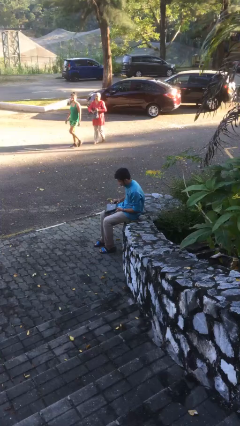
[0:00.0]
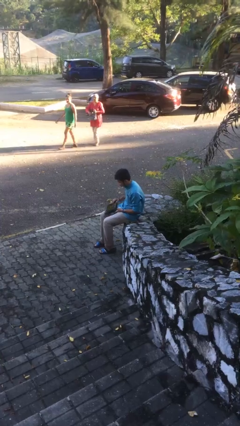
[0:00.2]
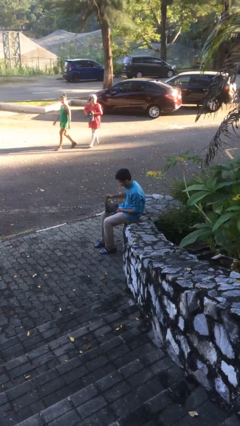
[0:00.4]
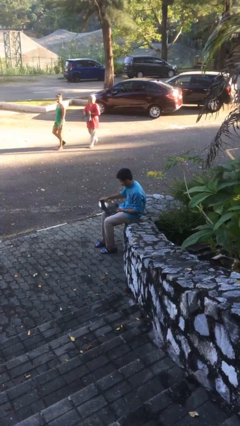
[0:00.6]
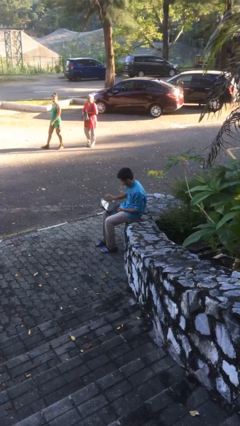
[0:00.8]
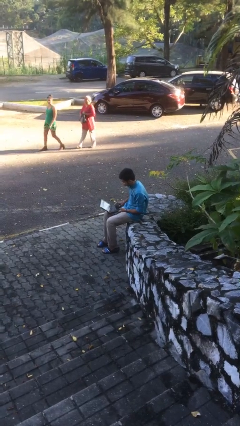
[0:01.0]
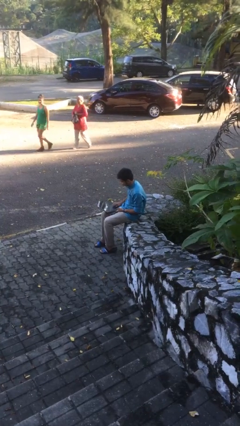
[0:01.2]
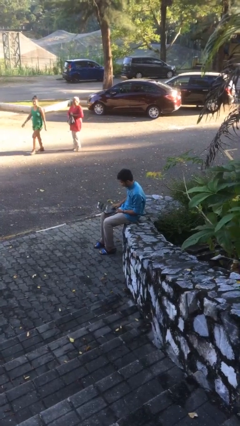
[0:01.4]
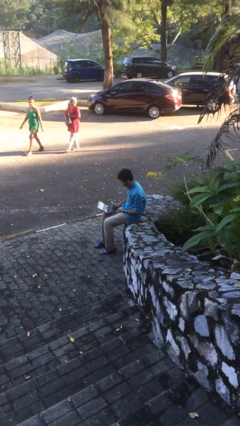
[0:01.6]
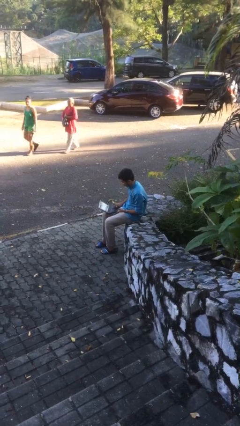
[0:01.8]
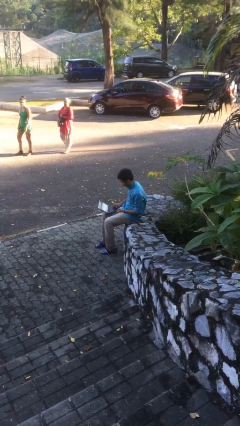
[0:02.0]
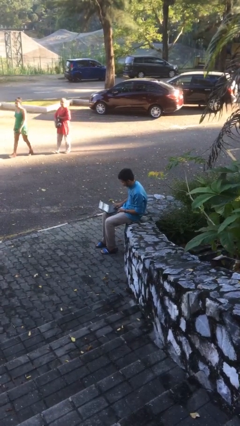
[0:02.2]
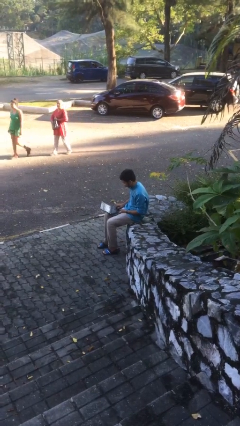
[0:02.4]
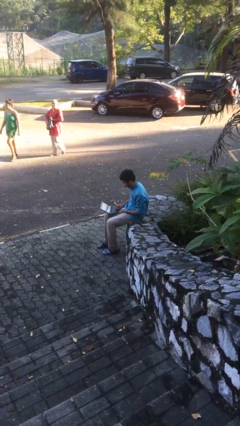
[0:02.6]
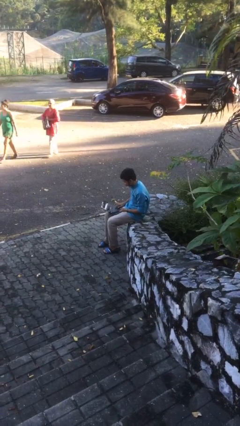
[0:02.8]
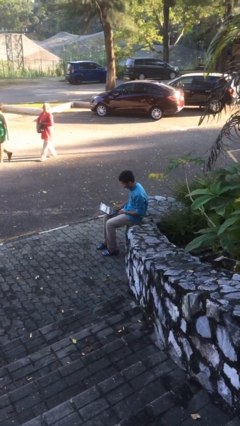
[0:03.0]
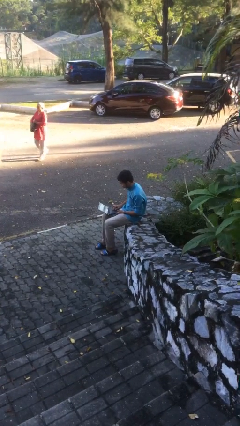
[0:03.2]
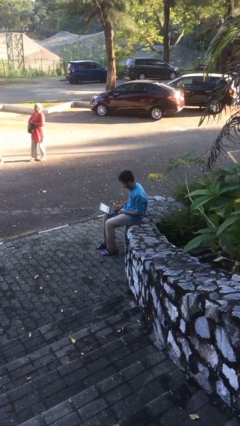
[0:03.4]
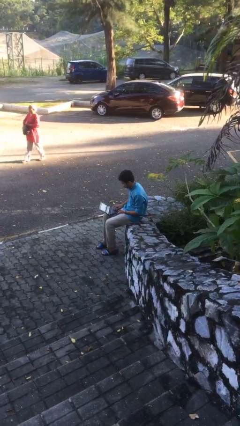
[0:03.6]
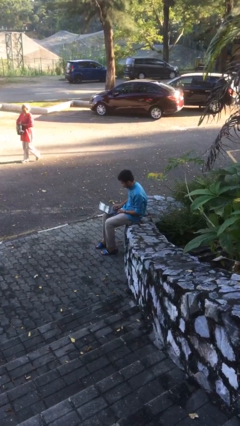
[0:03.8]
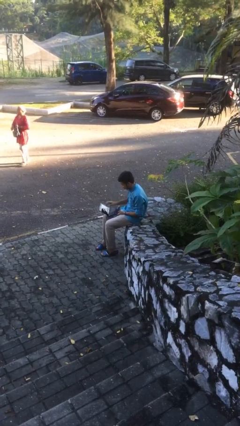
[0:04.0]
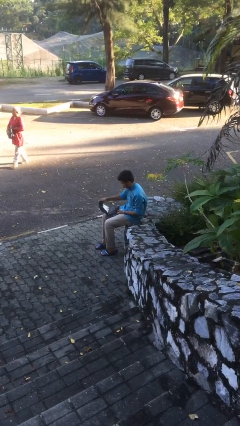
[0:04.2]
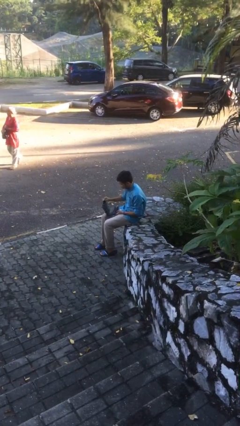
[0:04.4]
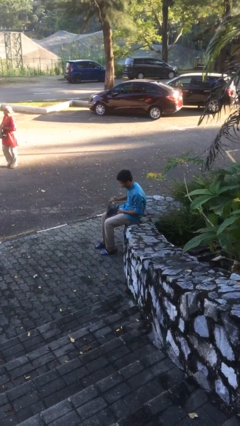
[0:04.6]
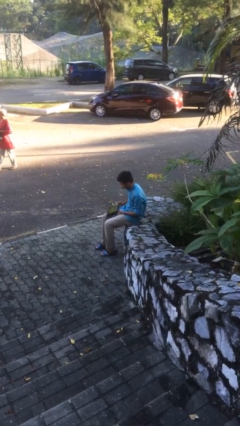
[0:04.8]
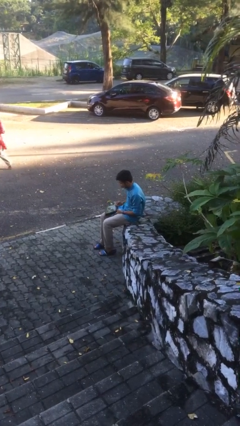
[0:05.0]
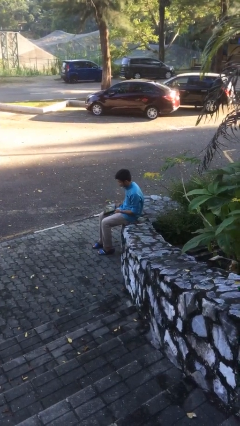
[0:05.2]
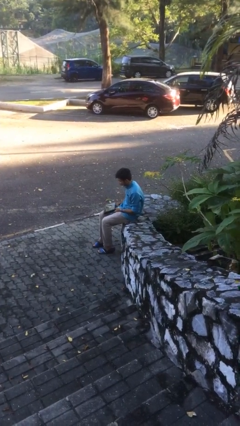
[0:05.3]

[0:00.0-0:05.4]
person interacts with laptop

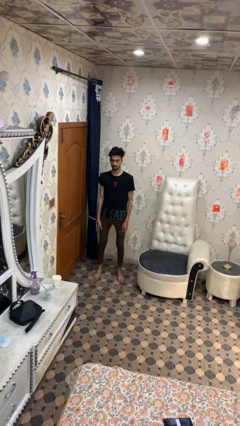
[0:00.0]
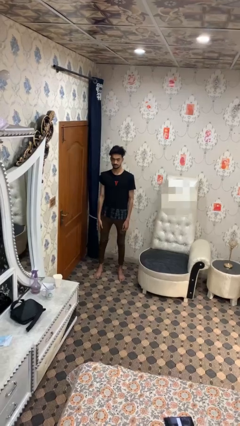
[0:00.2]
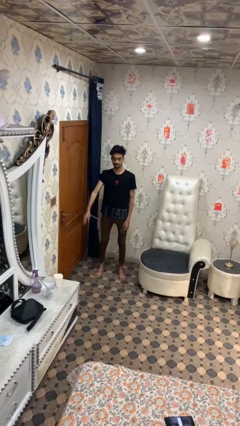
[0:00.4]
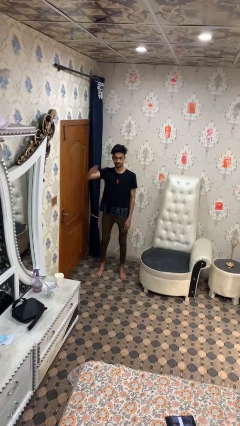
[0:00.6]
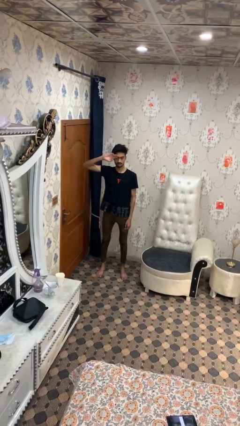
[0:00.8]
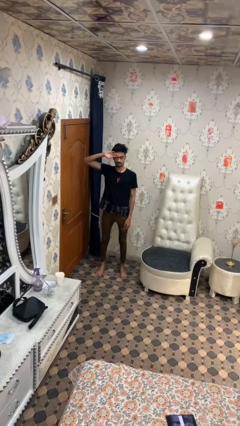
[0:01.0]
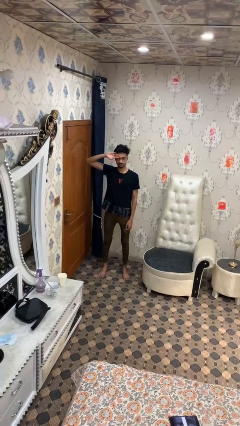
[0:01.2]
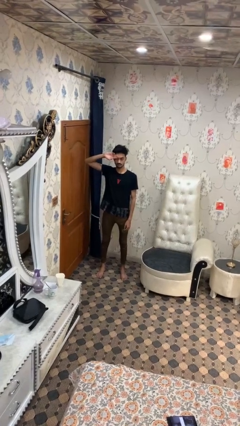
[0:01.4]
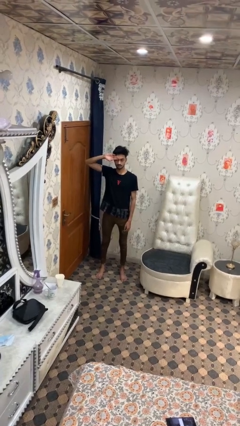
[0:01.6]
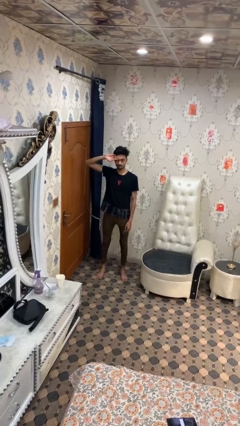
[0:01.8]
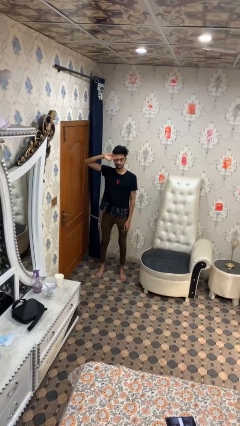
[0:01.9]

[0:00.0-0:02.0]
person salutes

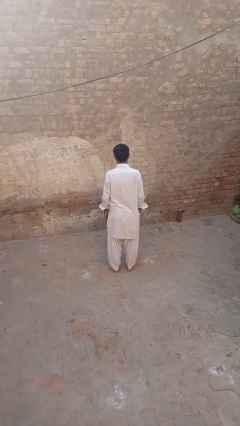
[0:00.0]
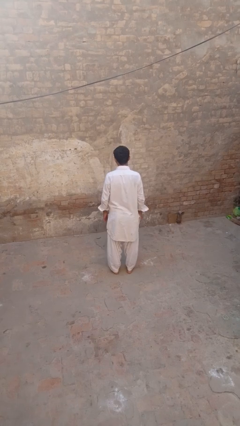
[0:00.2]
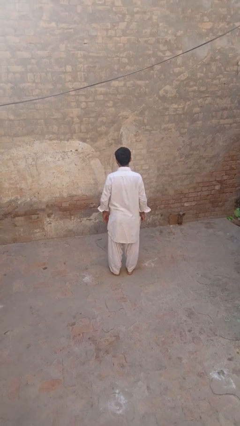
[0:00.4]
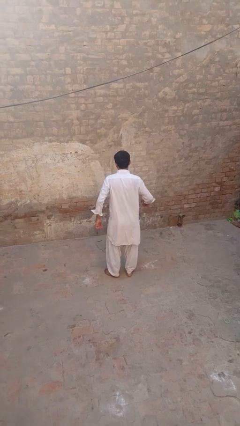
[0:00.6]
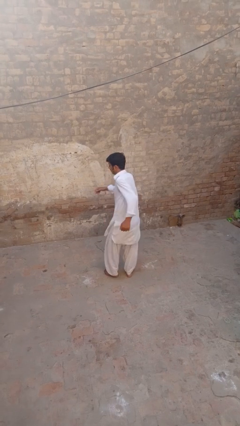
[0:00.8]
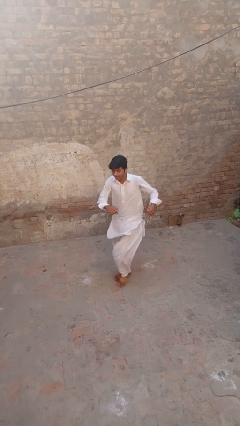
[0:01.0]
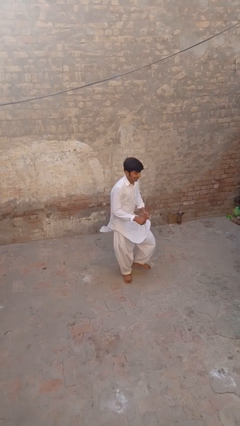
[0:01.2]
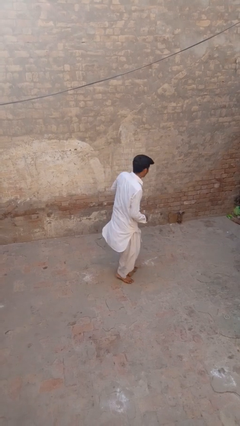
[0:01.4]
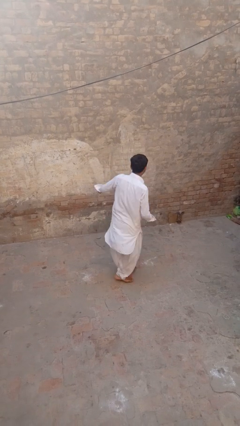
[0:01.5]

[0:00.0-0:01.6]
person twirls

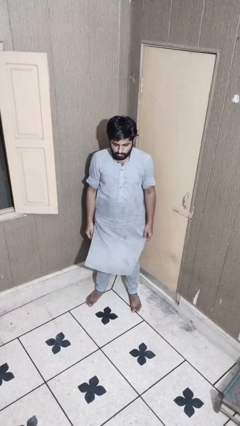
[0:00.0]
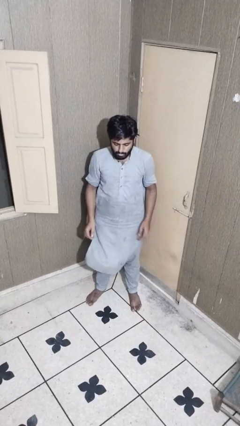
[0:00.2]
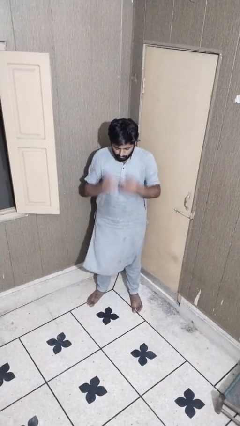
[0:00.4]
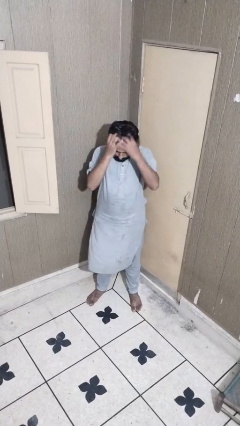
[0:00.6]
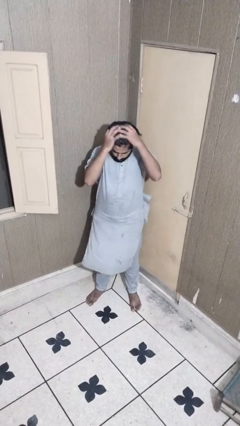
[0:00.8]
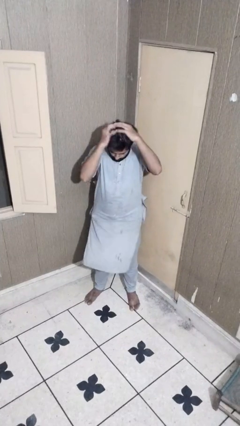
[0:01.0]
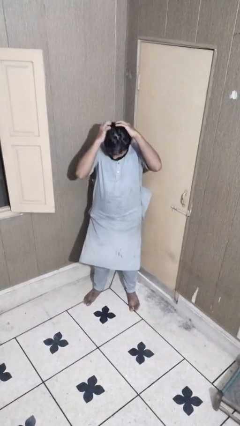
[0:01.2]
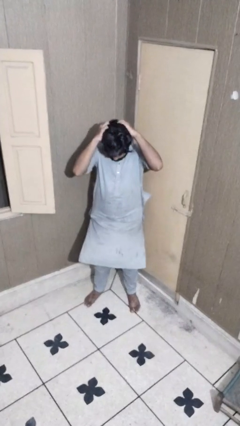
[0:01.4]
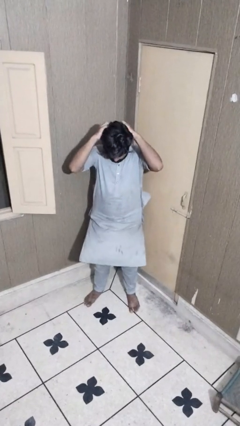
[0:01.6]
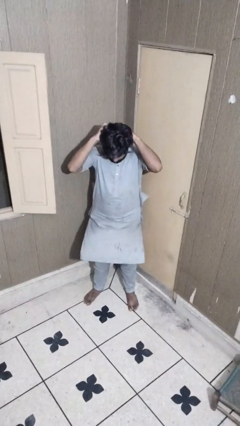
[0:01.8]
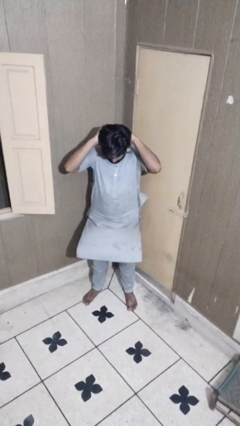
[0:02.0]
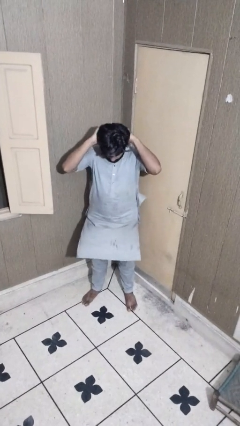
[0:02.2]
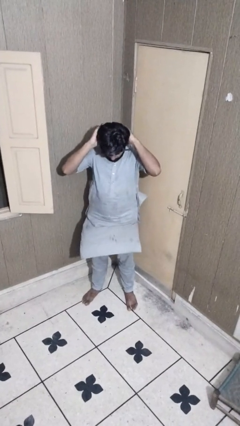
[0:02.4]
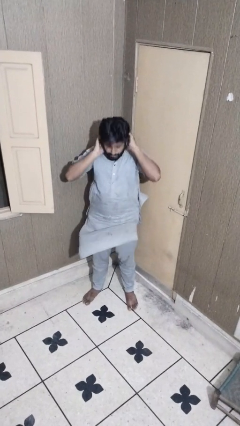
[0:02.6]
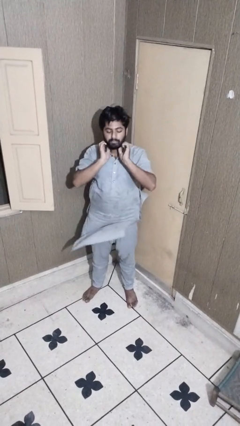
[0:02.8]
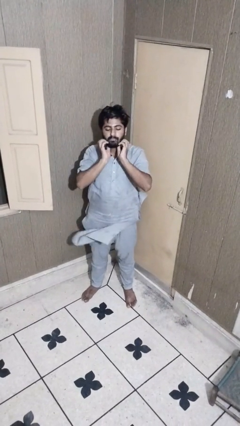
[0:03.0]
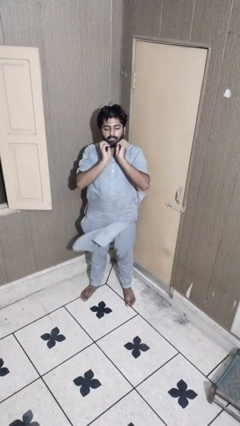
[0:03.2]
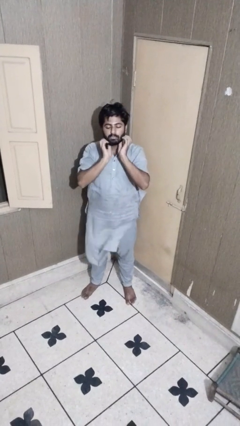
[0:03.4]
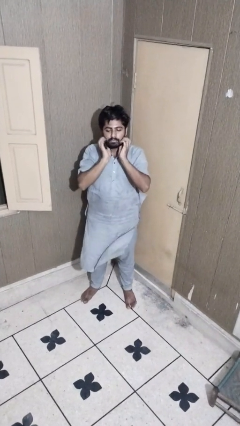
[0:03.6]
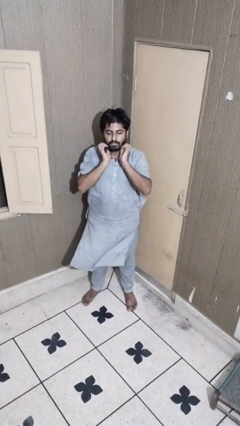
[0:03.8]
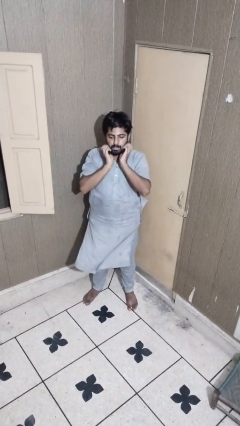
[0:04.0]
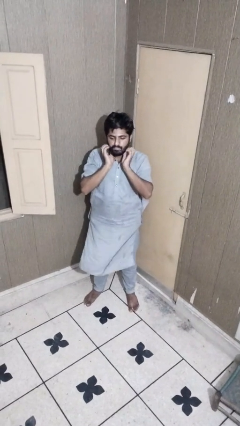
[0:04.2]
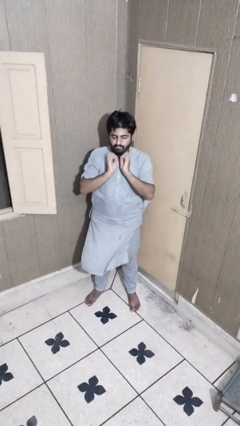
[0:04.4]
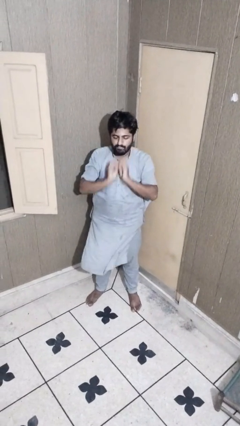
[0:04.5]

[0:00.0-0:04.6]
person scratches face

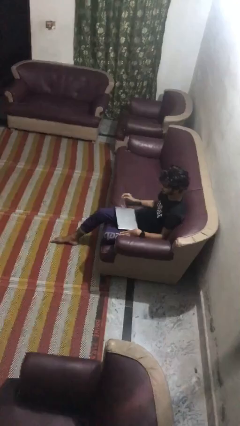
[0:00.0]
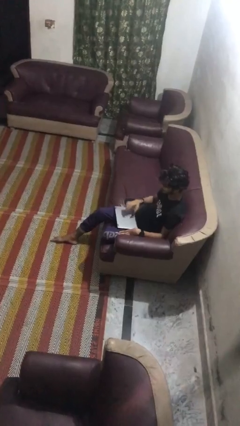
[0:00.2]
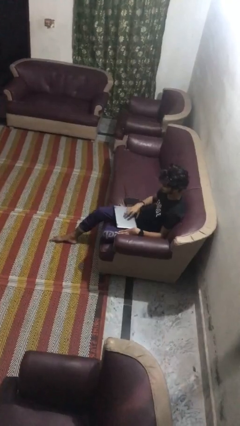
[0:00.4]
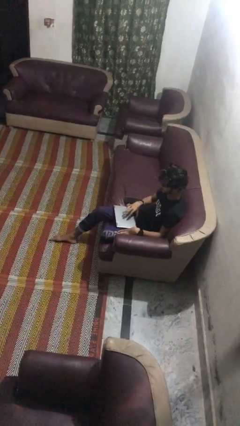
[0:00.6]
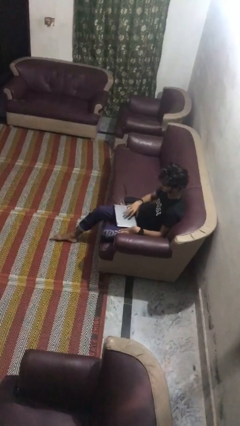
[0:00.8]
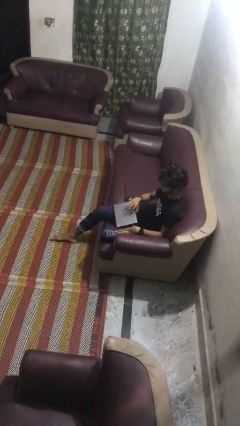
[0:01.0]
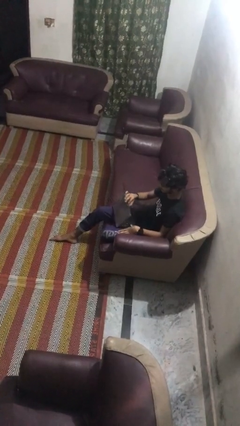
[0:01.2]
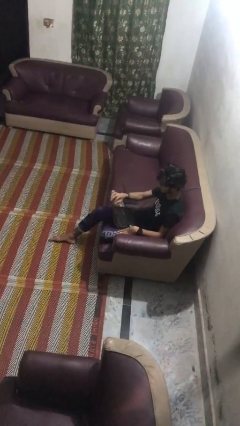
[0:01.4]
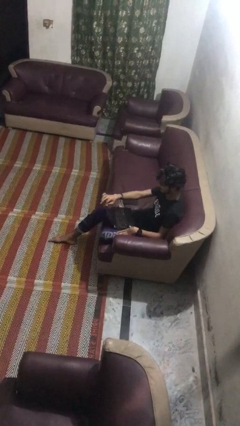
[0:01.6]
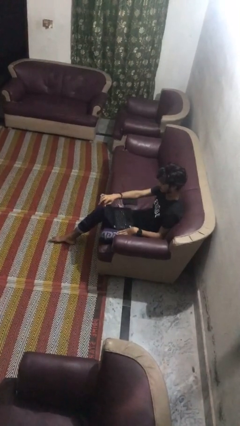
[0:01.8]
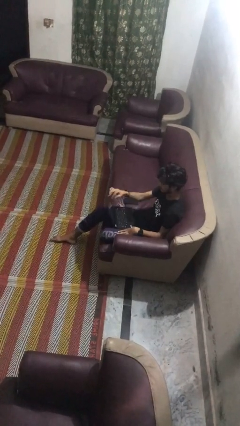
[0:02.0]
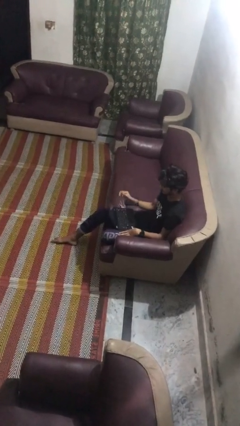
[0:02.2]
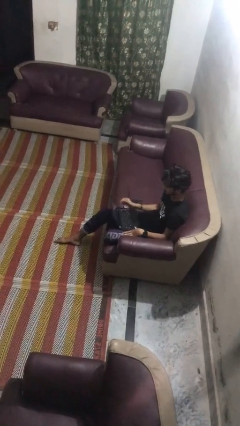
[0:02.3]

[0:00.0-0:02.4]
person opens laptop

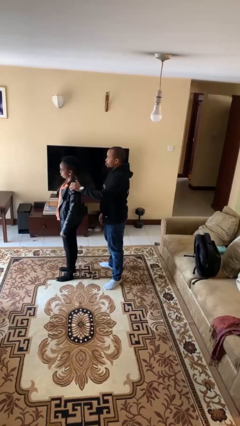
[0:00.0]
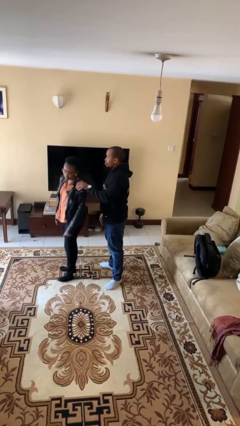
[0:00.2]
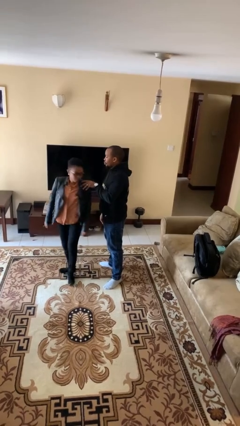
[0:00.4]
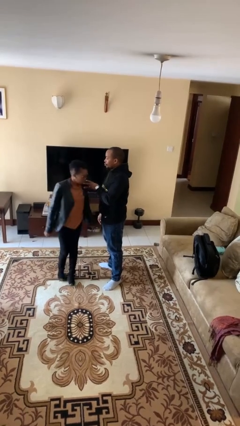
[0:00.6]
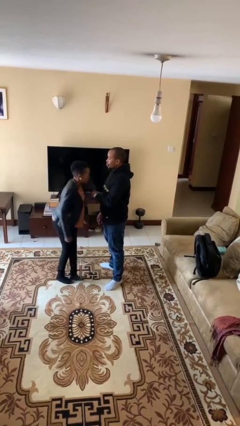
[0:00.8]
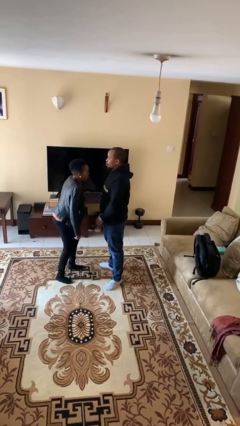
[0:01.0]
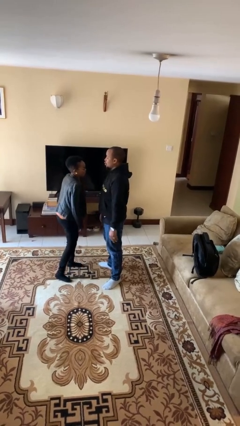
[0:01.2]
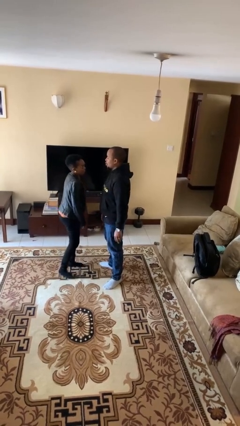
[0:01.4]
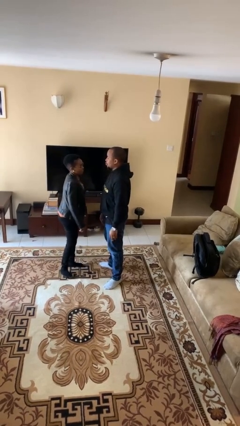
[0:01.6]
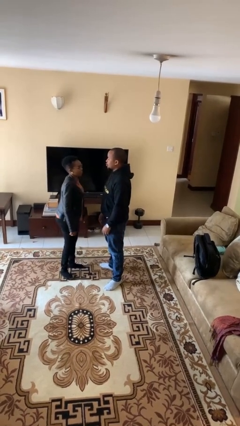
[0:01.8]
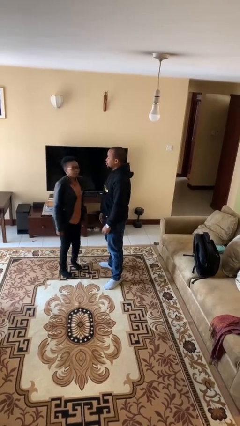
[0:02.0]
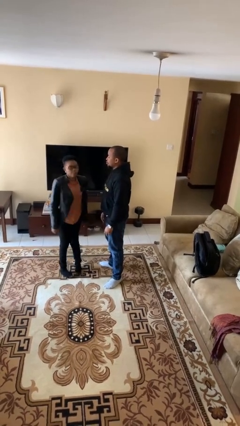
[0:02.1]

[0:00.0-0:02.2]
person spins person around
